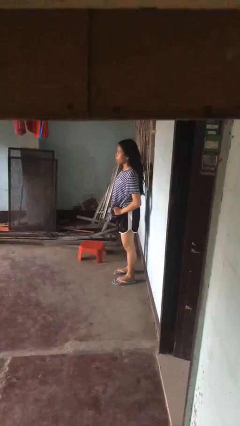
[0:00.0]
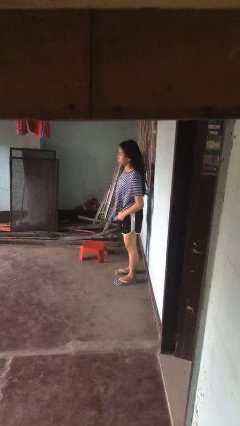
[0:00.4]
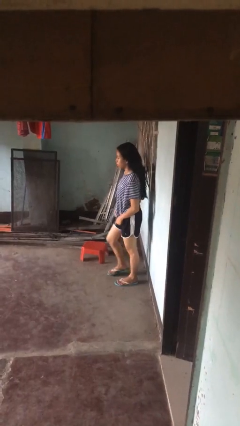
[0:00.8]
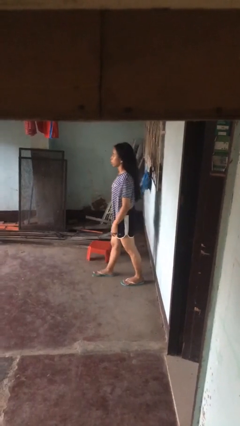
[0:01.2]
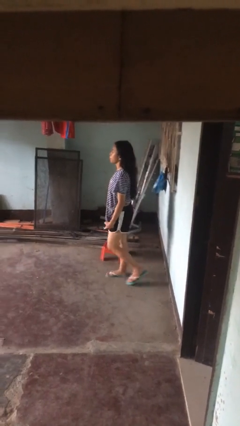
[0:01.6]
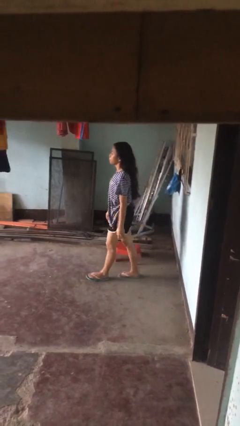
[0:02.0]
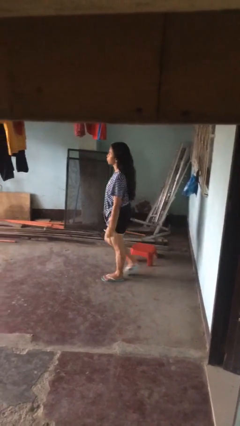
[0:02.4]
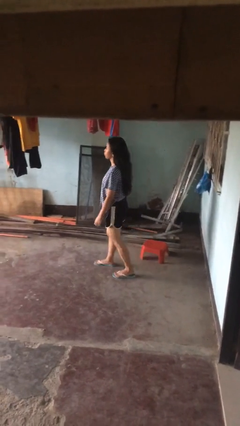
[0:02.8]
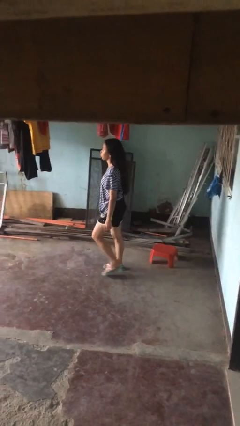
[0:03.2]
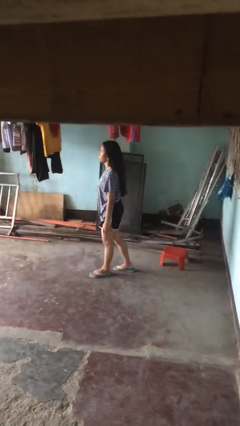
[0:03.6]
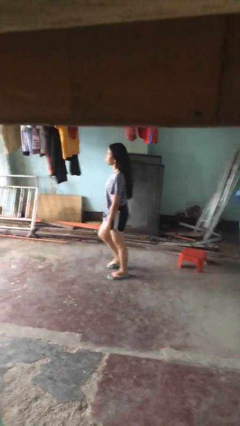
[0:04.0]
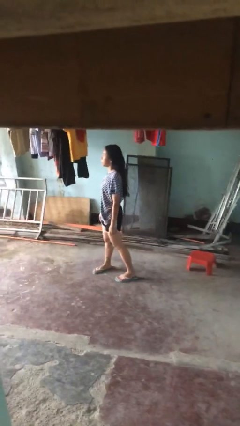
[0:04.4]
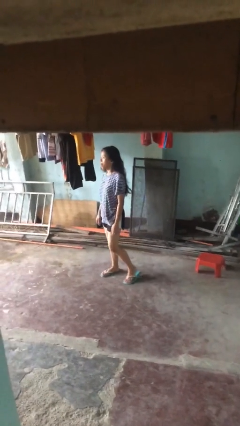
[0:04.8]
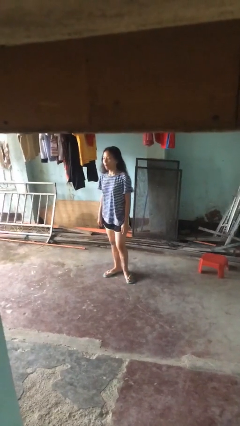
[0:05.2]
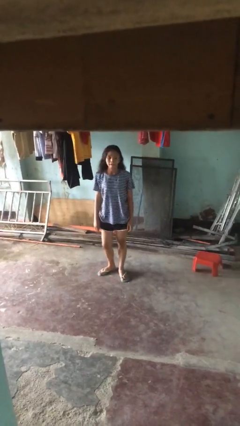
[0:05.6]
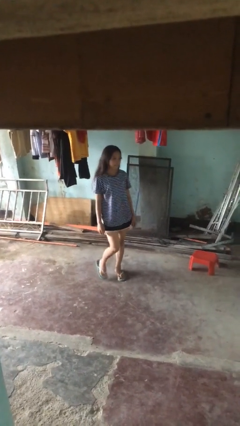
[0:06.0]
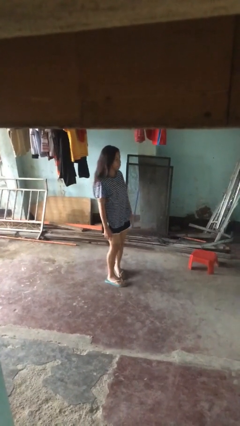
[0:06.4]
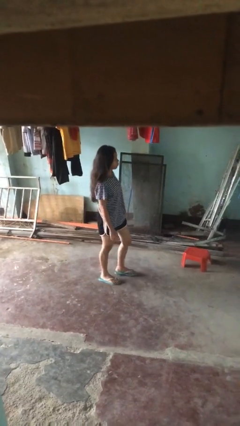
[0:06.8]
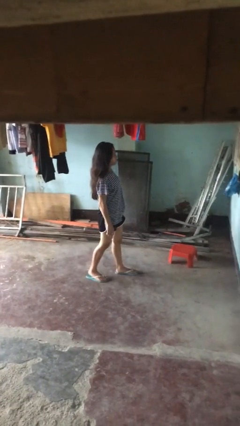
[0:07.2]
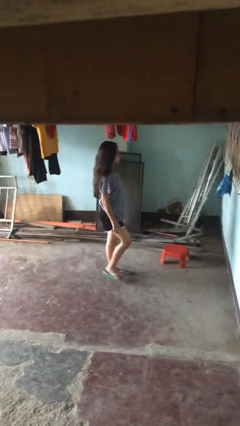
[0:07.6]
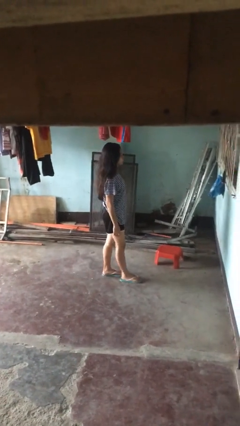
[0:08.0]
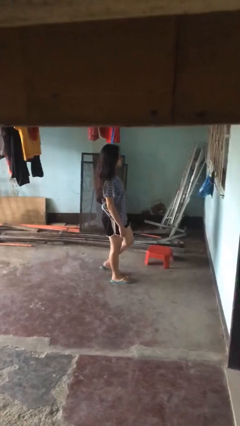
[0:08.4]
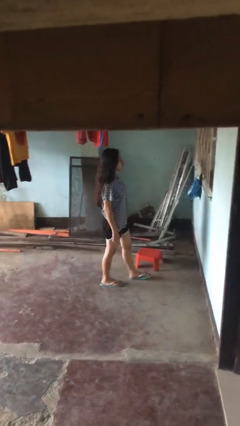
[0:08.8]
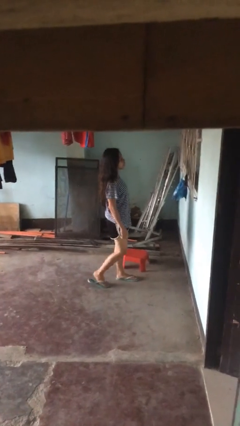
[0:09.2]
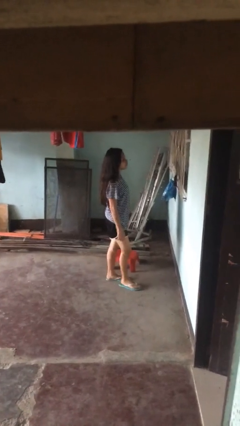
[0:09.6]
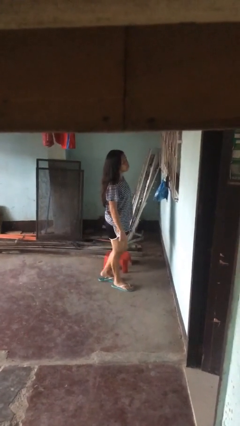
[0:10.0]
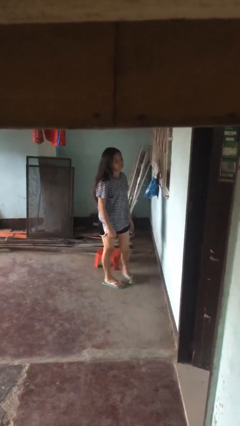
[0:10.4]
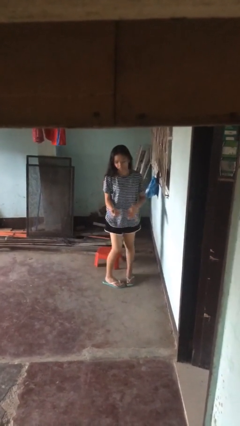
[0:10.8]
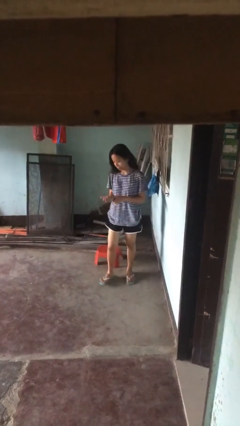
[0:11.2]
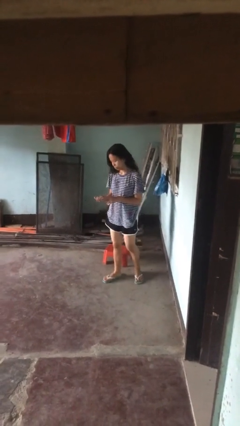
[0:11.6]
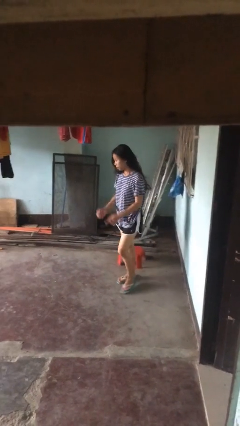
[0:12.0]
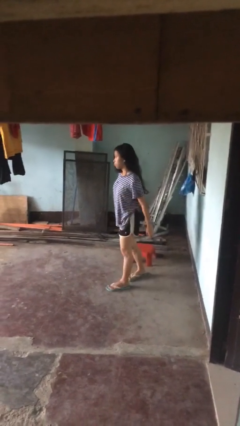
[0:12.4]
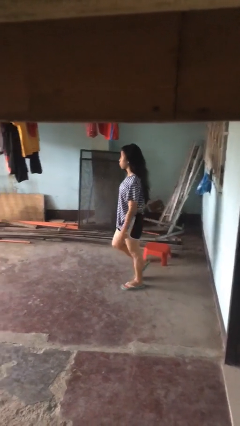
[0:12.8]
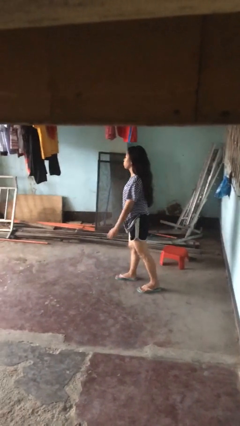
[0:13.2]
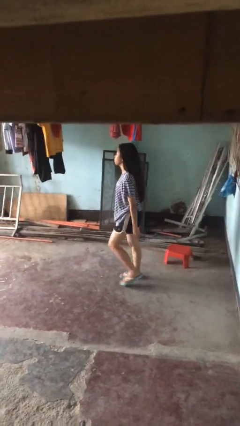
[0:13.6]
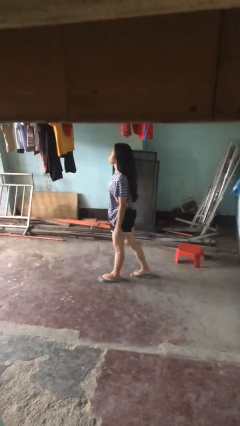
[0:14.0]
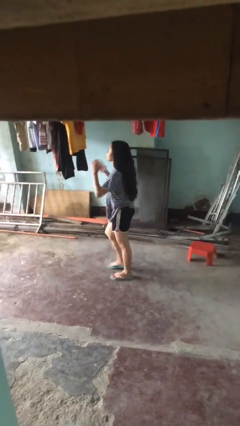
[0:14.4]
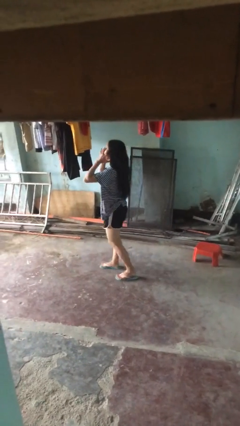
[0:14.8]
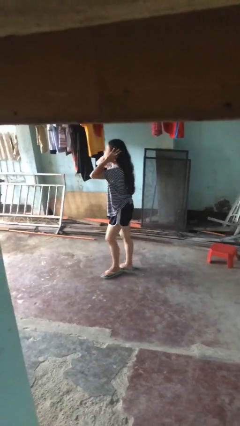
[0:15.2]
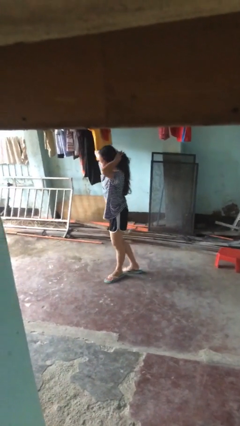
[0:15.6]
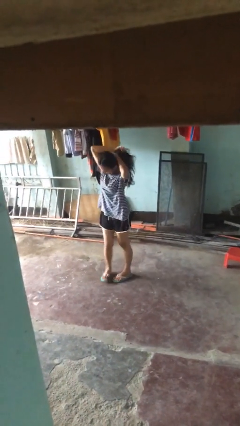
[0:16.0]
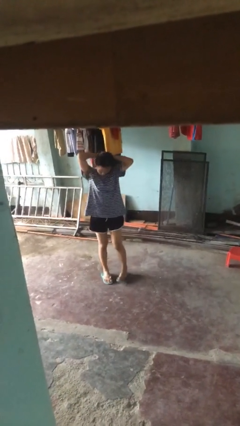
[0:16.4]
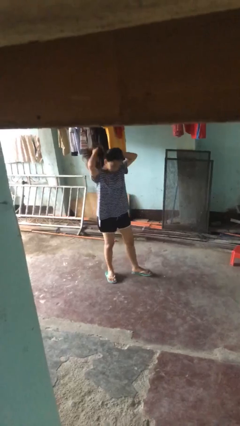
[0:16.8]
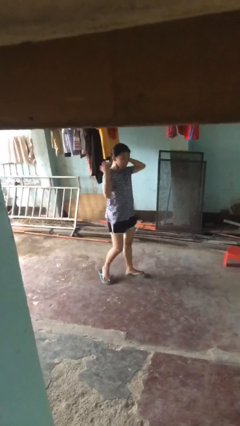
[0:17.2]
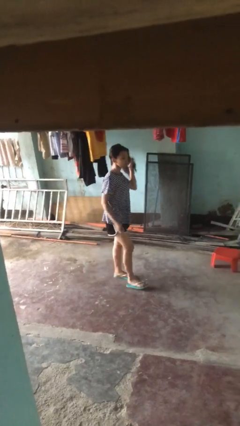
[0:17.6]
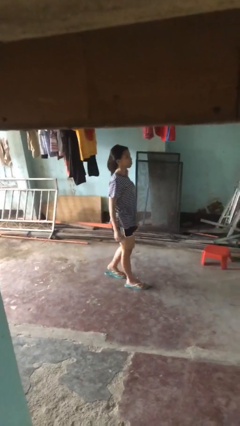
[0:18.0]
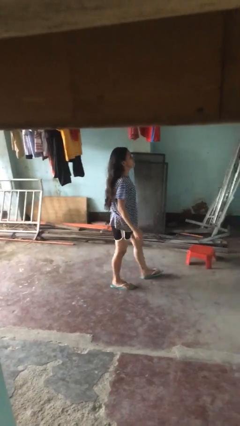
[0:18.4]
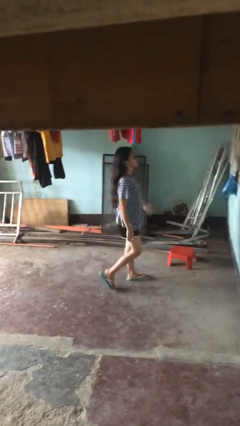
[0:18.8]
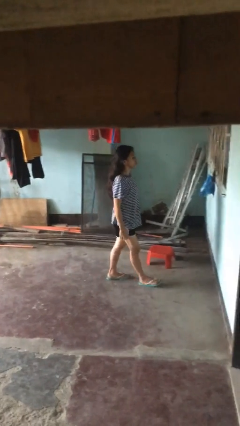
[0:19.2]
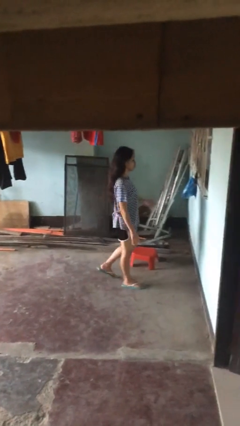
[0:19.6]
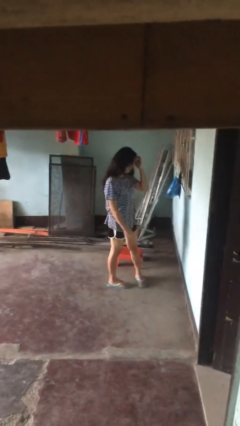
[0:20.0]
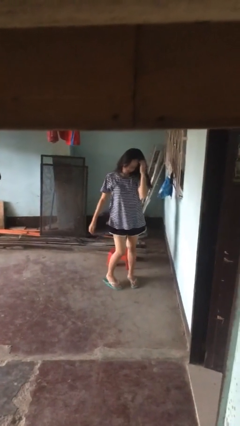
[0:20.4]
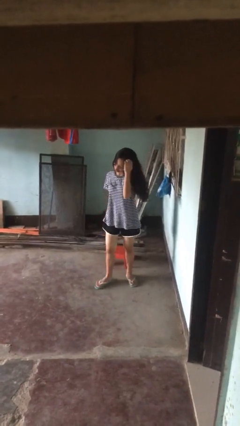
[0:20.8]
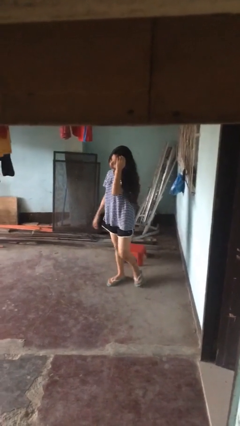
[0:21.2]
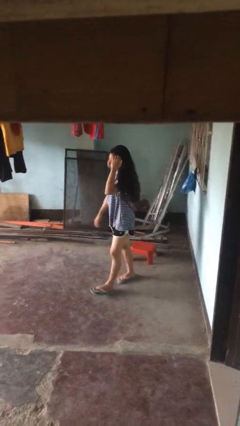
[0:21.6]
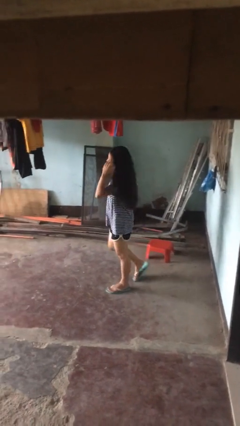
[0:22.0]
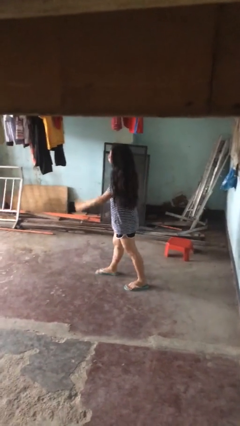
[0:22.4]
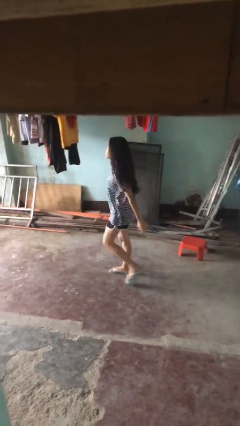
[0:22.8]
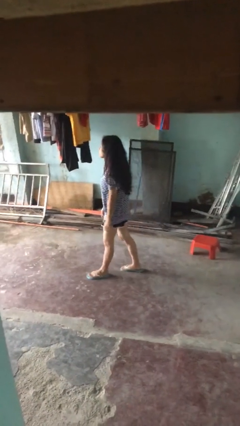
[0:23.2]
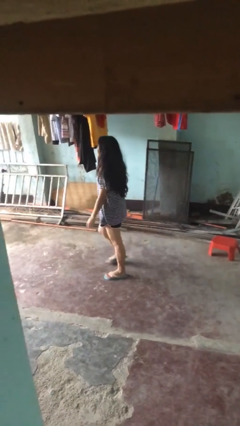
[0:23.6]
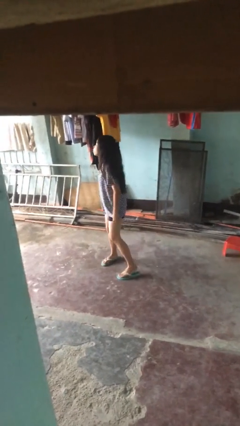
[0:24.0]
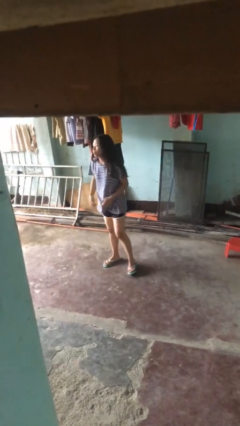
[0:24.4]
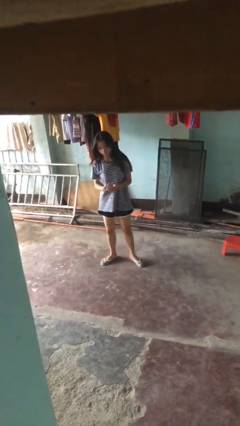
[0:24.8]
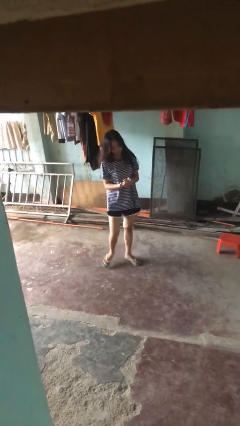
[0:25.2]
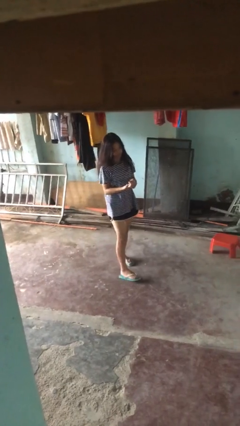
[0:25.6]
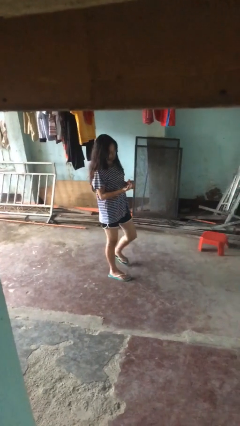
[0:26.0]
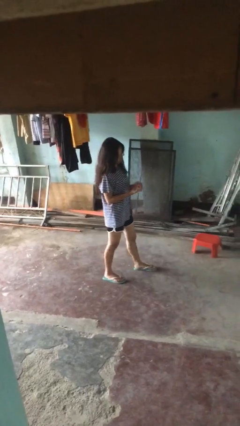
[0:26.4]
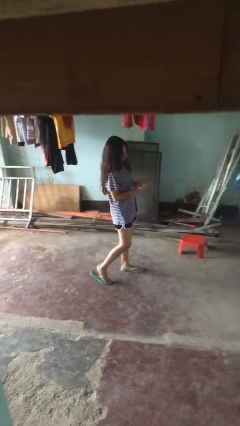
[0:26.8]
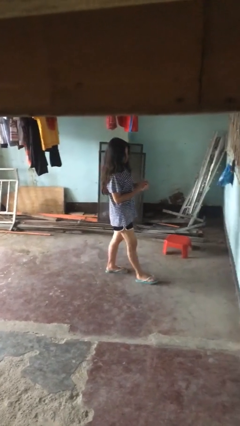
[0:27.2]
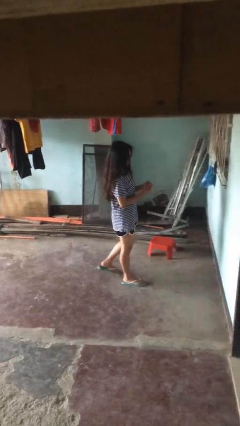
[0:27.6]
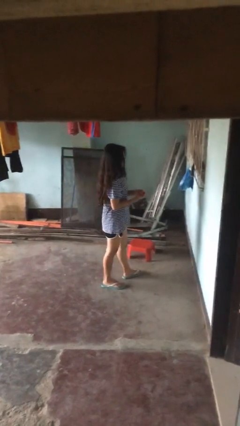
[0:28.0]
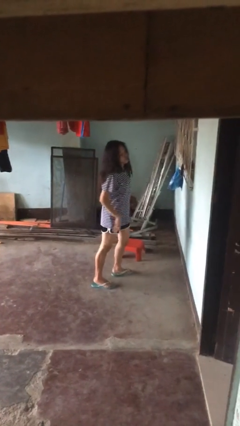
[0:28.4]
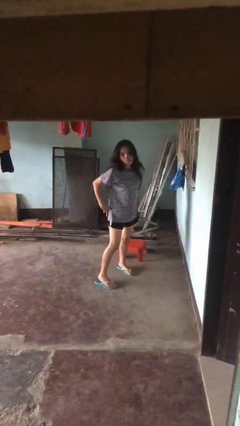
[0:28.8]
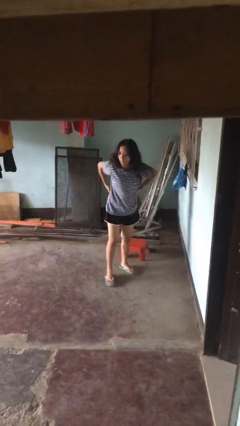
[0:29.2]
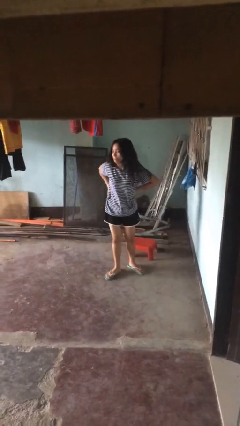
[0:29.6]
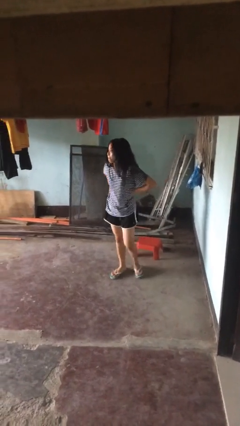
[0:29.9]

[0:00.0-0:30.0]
person walks

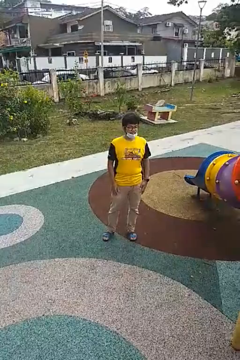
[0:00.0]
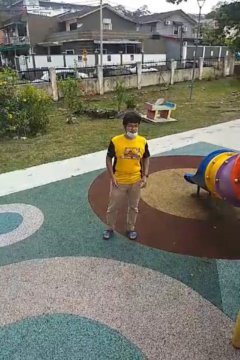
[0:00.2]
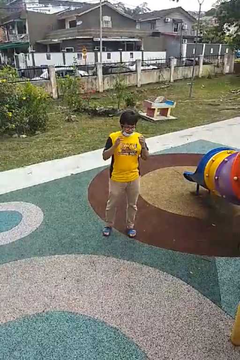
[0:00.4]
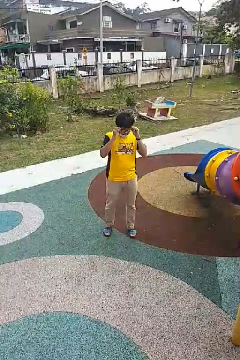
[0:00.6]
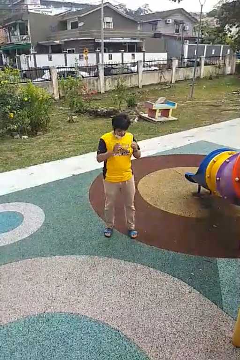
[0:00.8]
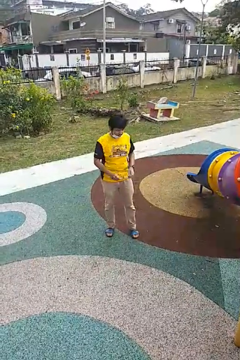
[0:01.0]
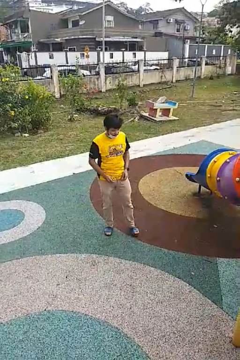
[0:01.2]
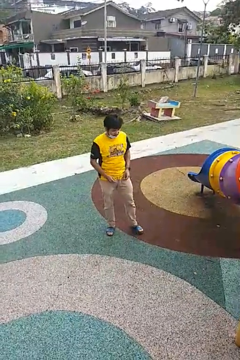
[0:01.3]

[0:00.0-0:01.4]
person takes off glasses

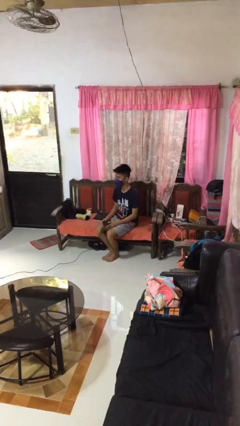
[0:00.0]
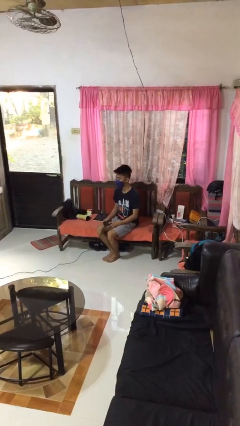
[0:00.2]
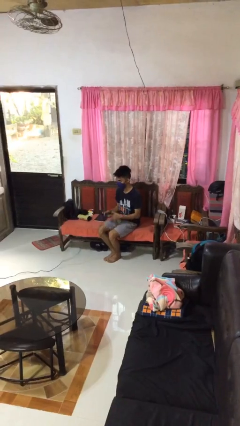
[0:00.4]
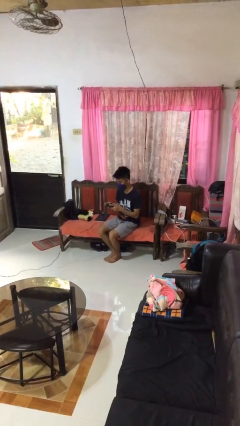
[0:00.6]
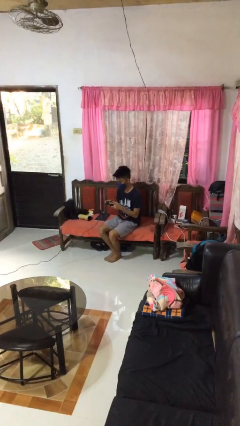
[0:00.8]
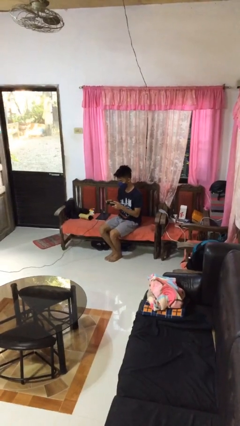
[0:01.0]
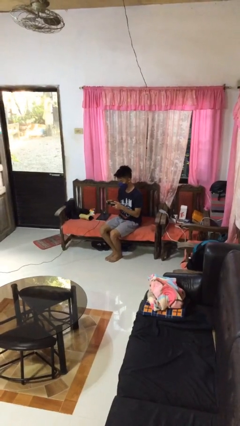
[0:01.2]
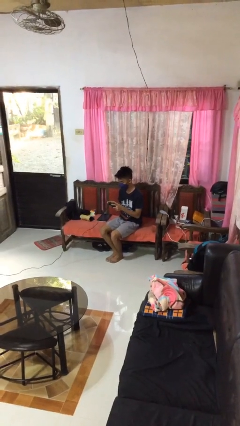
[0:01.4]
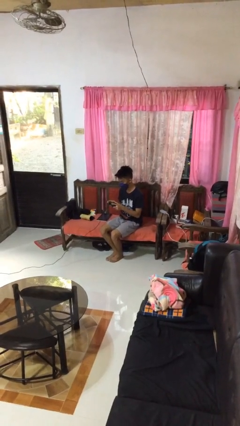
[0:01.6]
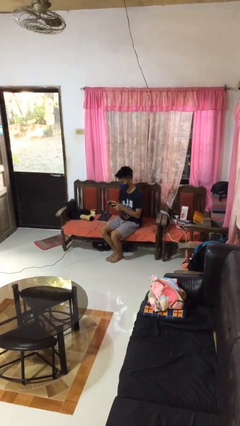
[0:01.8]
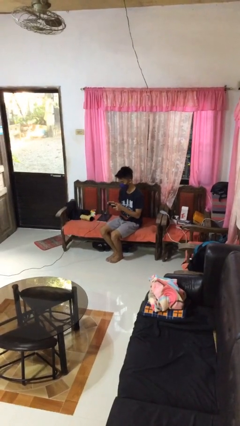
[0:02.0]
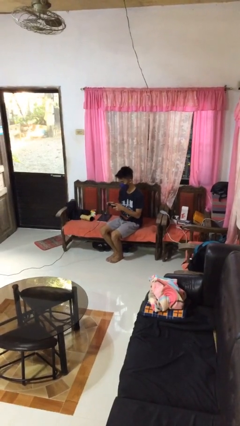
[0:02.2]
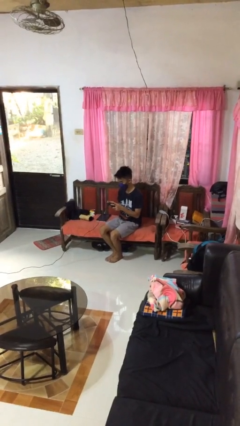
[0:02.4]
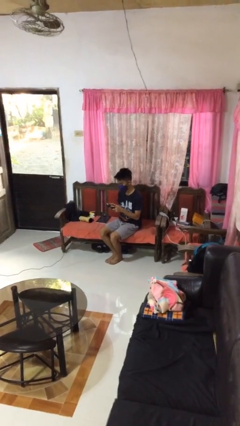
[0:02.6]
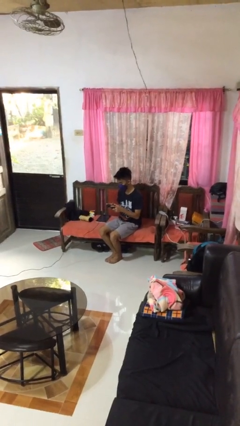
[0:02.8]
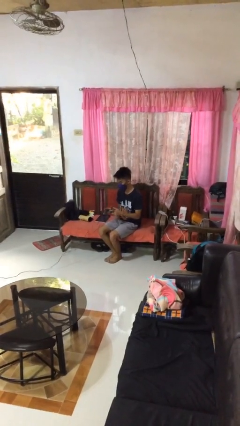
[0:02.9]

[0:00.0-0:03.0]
person interacts with handheld game
